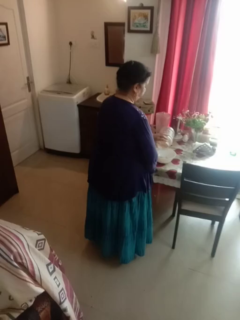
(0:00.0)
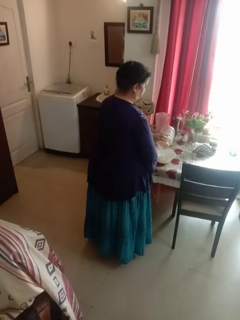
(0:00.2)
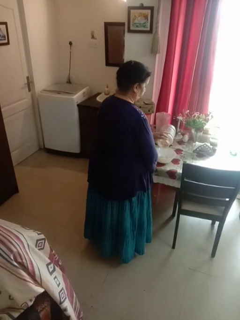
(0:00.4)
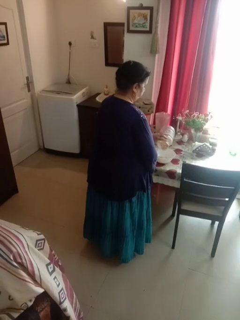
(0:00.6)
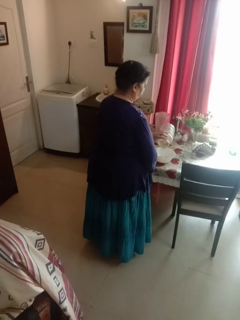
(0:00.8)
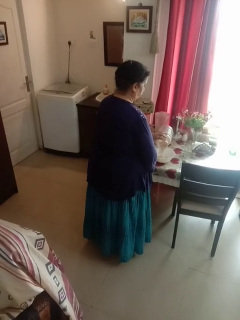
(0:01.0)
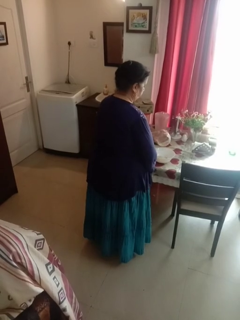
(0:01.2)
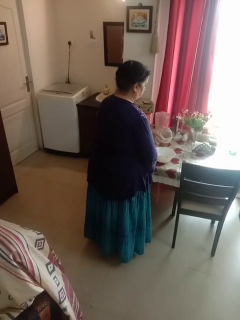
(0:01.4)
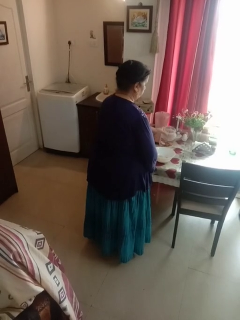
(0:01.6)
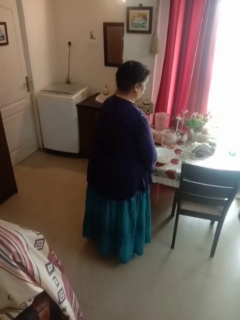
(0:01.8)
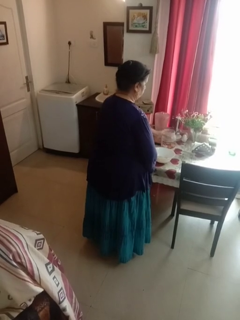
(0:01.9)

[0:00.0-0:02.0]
person pours into bowl

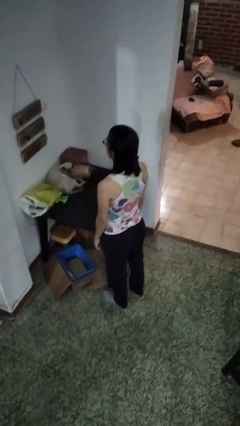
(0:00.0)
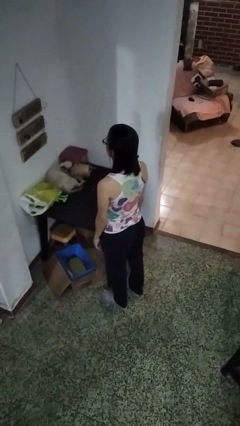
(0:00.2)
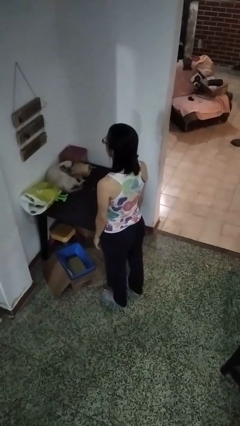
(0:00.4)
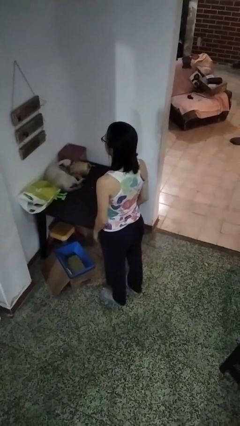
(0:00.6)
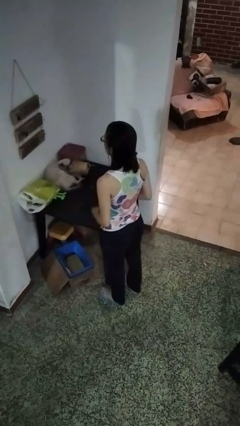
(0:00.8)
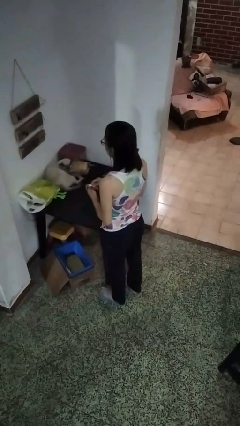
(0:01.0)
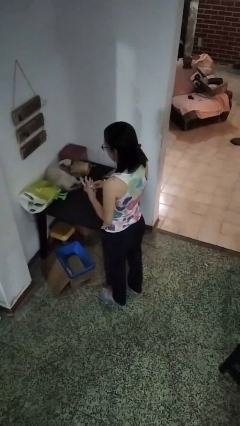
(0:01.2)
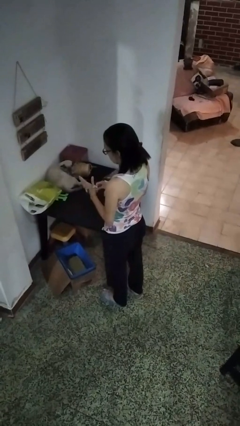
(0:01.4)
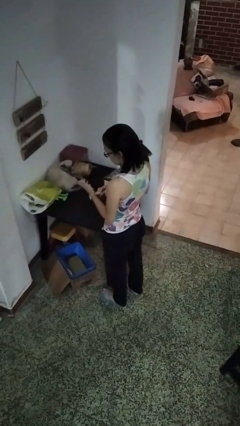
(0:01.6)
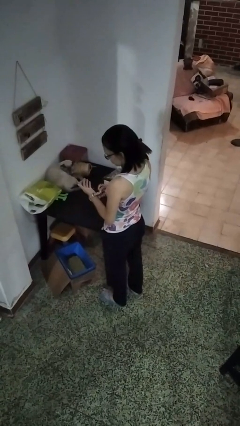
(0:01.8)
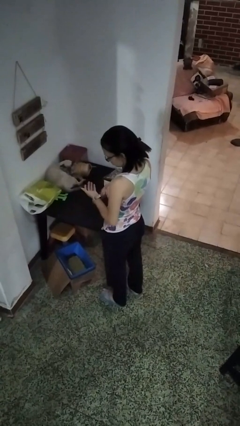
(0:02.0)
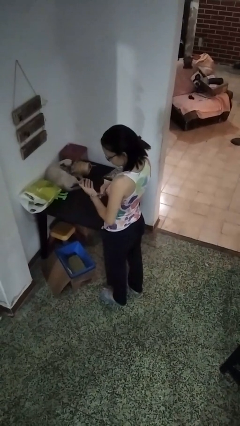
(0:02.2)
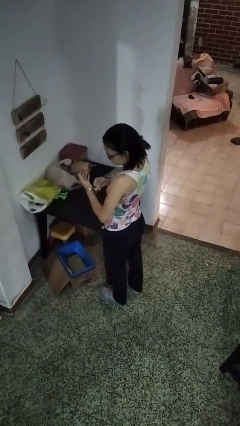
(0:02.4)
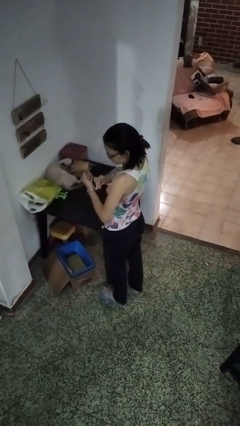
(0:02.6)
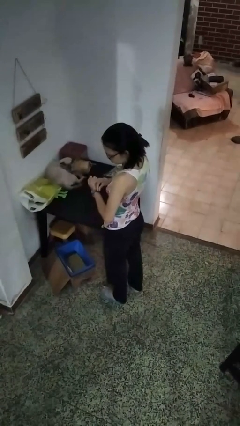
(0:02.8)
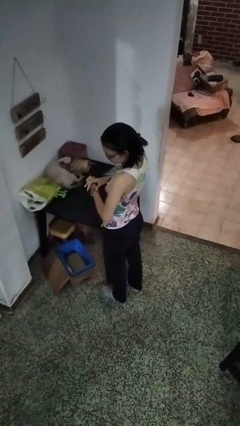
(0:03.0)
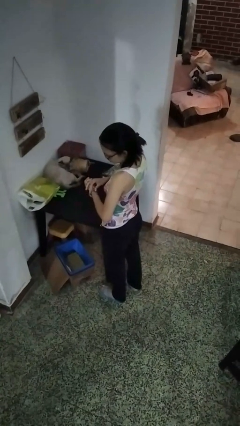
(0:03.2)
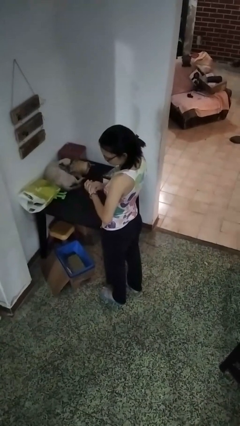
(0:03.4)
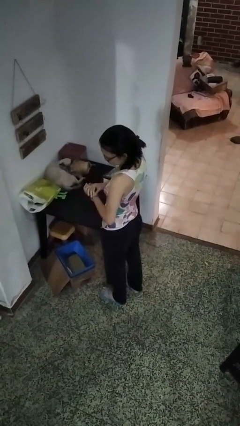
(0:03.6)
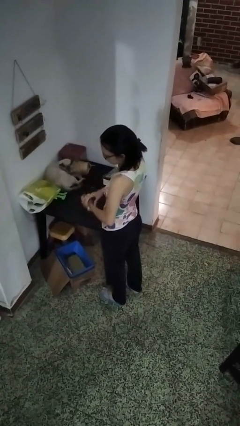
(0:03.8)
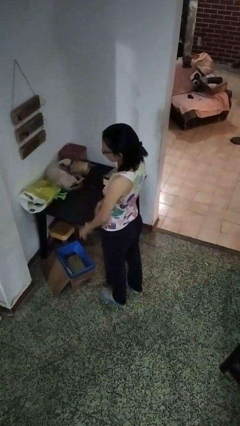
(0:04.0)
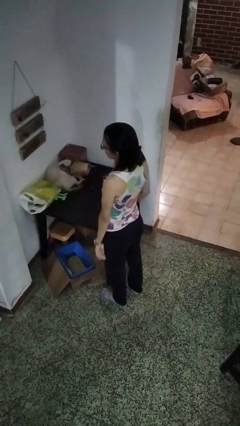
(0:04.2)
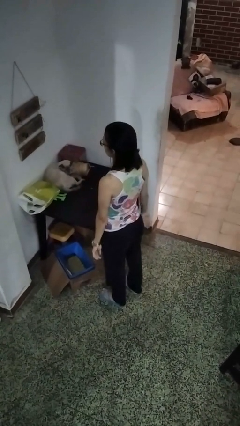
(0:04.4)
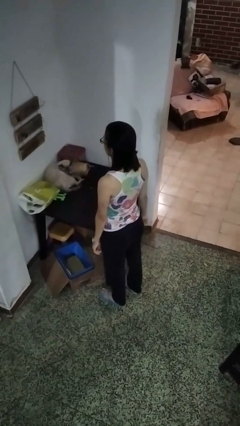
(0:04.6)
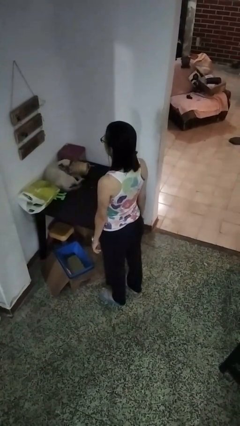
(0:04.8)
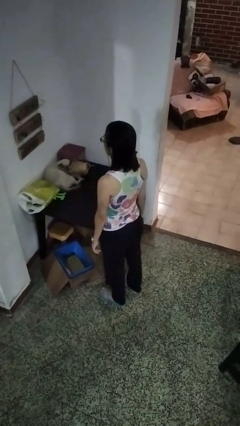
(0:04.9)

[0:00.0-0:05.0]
person puts on wristwatch

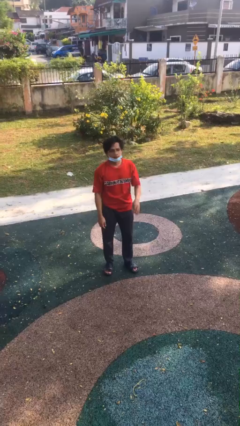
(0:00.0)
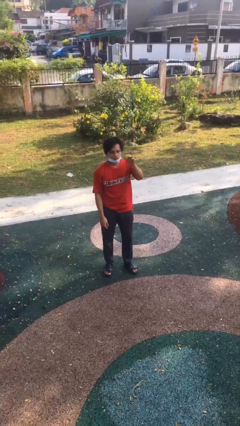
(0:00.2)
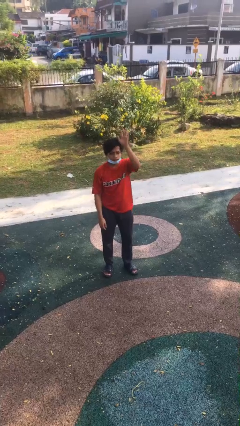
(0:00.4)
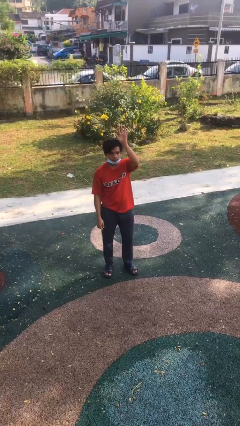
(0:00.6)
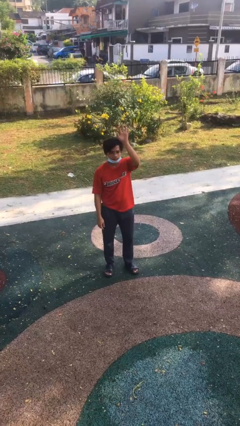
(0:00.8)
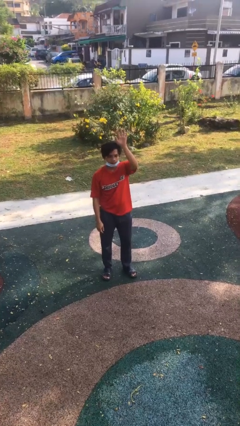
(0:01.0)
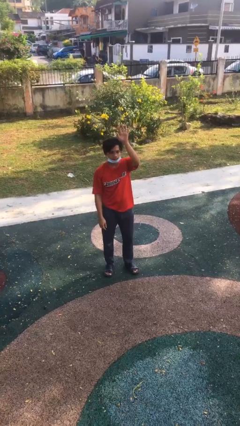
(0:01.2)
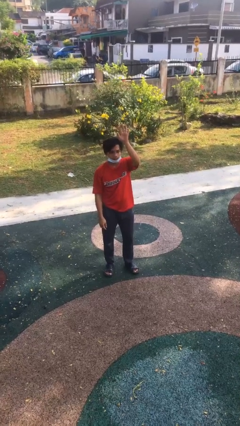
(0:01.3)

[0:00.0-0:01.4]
person gestures raise hand

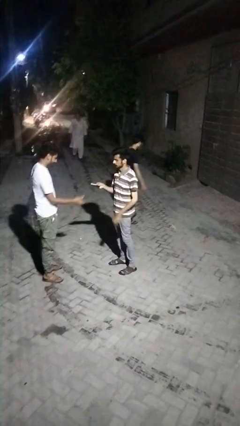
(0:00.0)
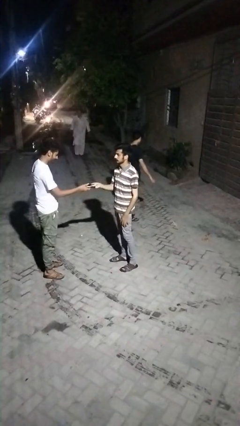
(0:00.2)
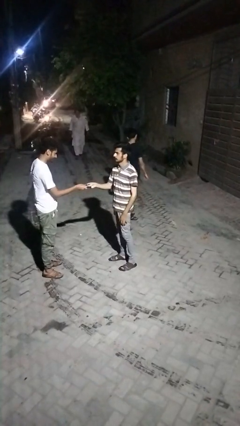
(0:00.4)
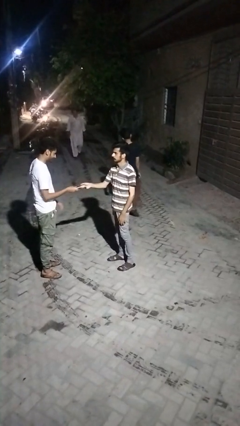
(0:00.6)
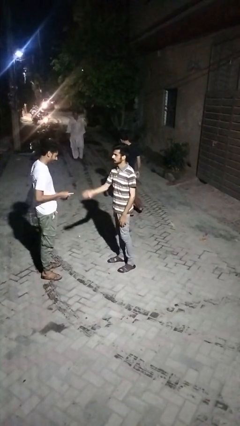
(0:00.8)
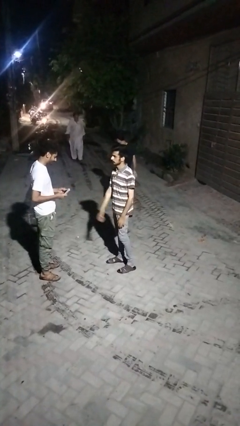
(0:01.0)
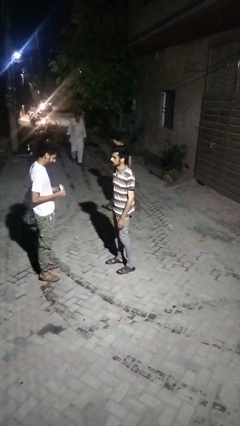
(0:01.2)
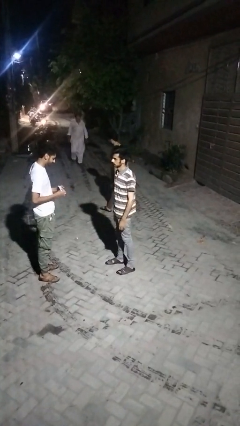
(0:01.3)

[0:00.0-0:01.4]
person transfers object to person

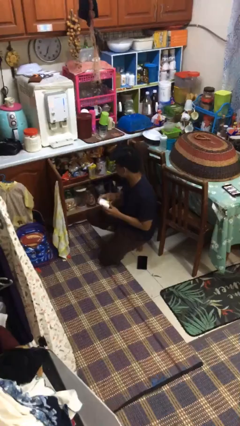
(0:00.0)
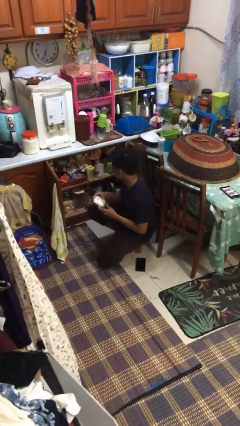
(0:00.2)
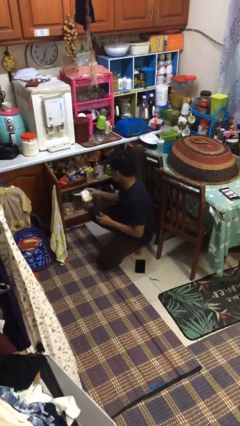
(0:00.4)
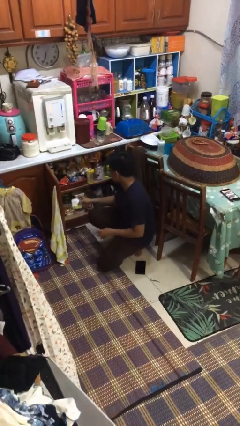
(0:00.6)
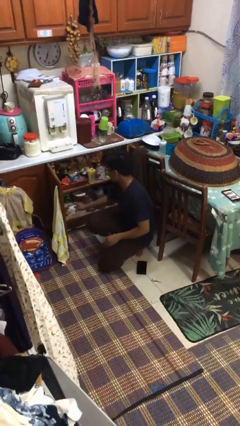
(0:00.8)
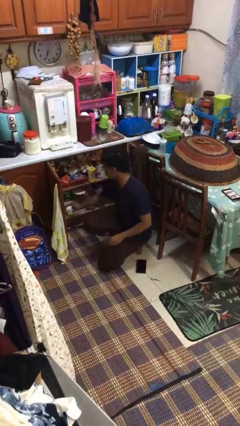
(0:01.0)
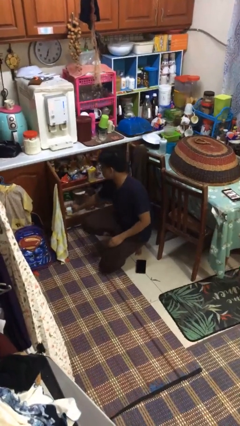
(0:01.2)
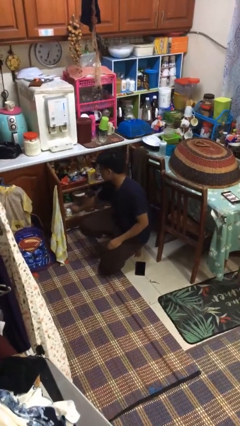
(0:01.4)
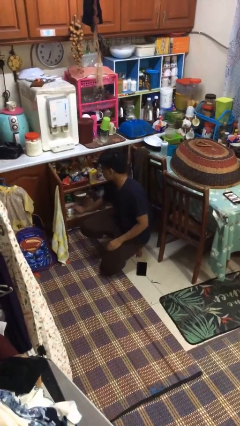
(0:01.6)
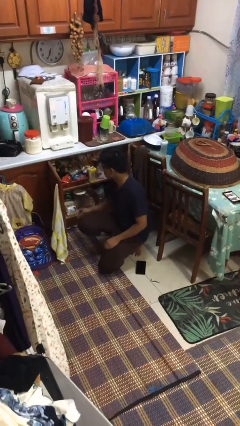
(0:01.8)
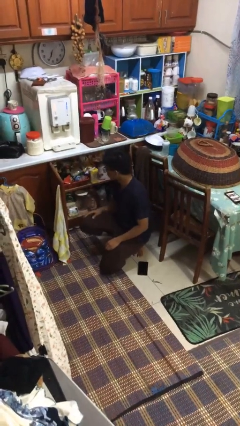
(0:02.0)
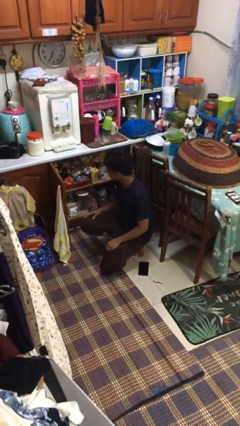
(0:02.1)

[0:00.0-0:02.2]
person puts object in cabinet

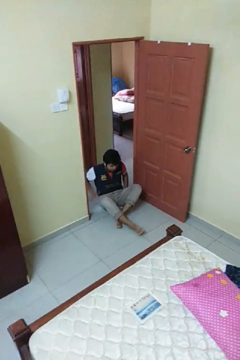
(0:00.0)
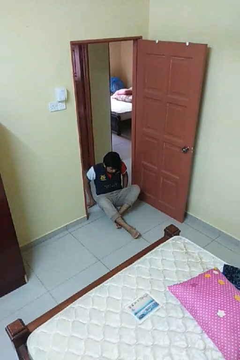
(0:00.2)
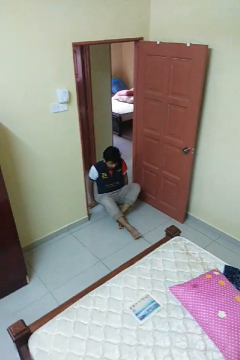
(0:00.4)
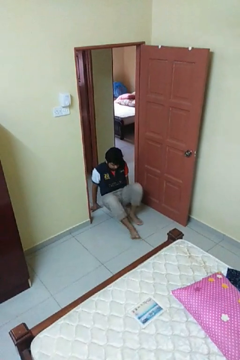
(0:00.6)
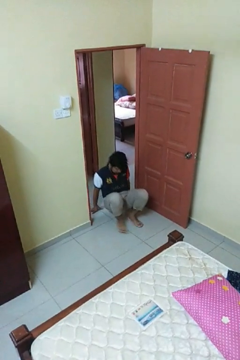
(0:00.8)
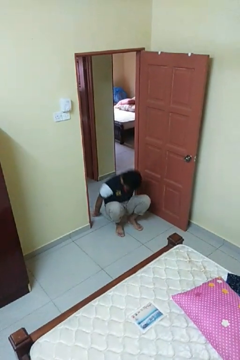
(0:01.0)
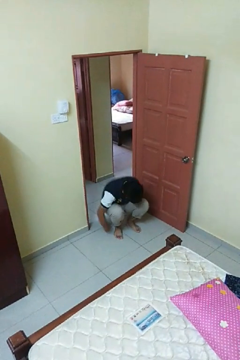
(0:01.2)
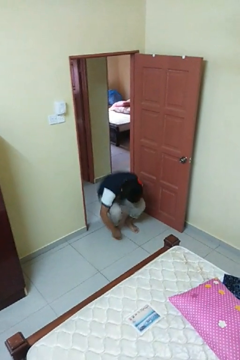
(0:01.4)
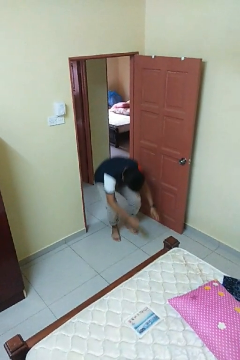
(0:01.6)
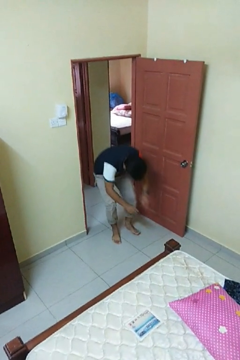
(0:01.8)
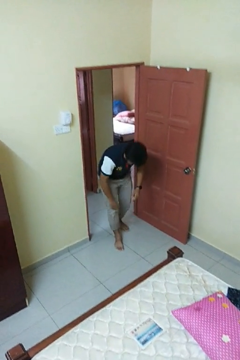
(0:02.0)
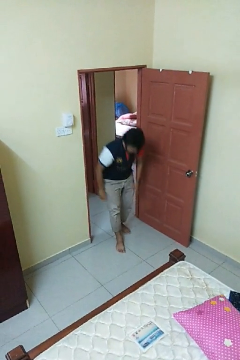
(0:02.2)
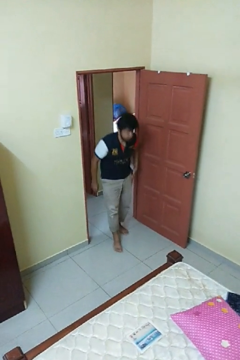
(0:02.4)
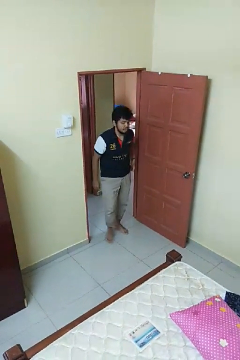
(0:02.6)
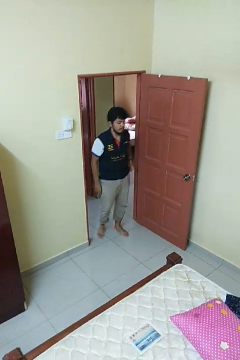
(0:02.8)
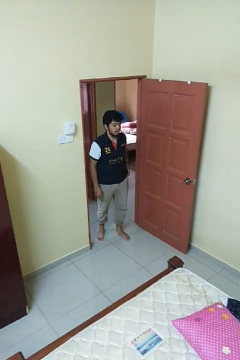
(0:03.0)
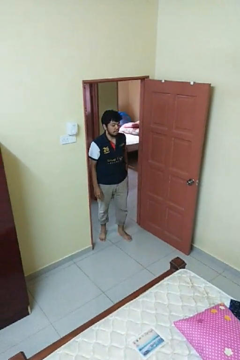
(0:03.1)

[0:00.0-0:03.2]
person stands up from floor

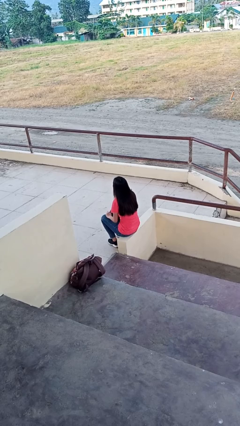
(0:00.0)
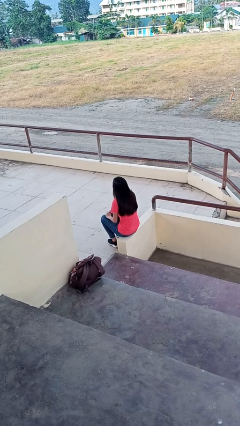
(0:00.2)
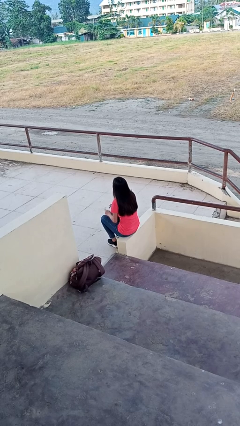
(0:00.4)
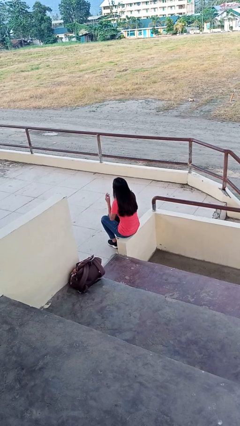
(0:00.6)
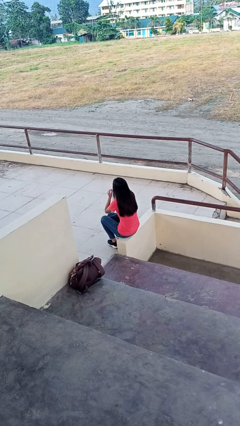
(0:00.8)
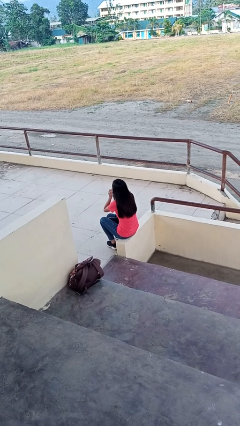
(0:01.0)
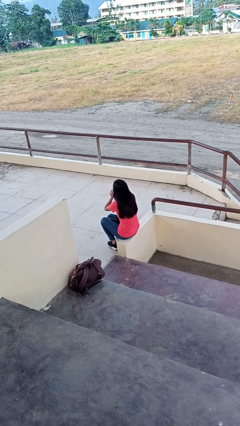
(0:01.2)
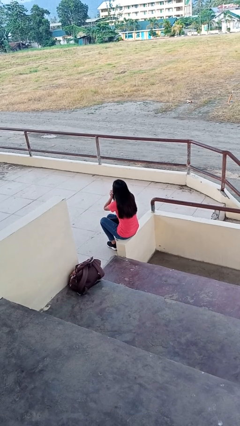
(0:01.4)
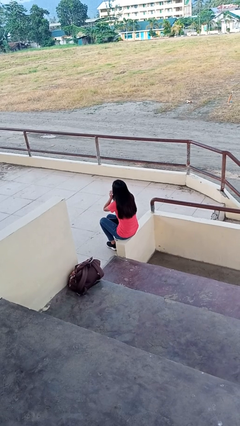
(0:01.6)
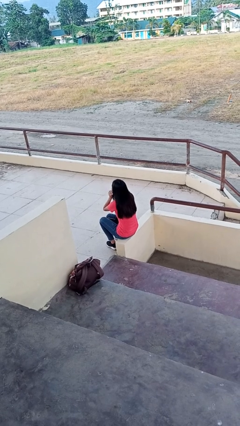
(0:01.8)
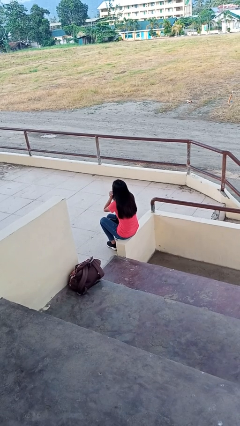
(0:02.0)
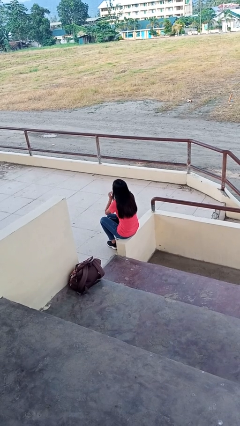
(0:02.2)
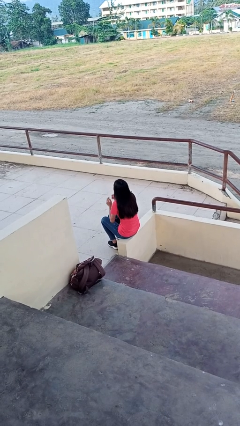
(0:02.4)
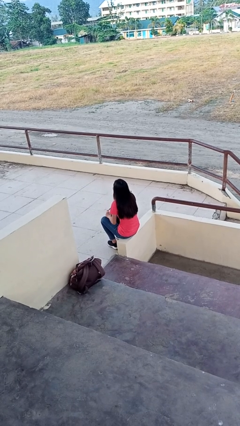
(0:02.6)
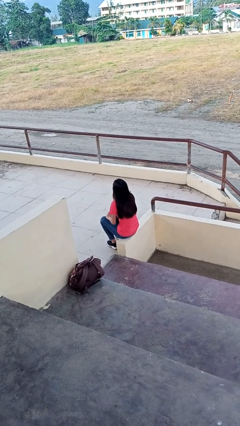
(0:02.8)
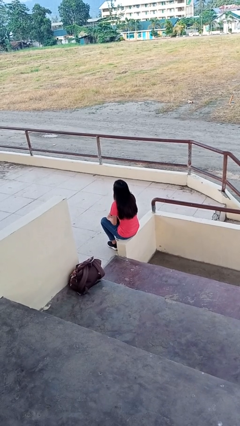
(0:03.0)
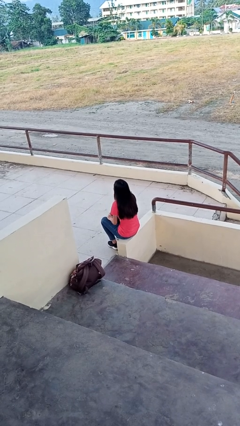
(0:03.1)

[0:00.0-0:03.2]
person puts on headphones

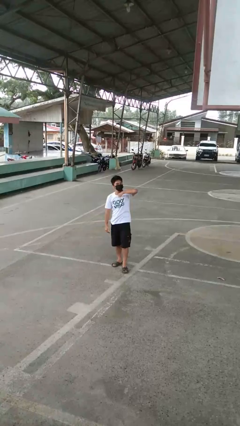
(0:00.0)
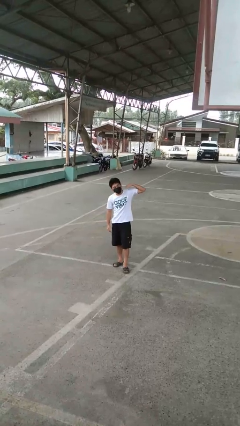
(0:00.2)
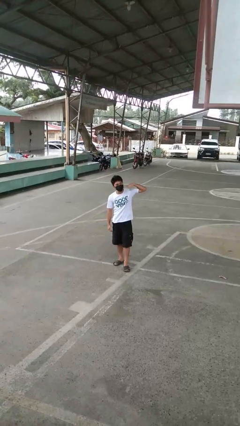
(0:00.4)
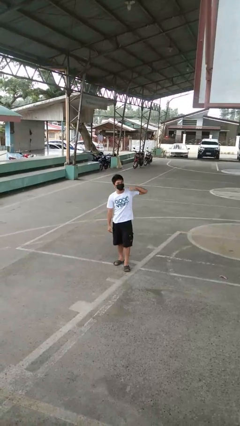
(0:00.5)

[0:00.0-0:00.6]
person gestures cut
